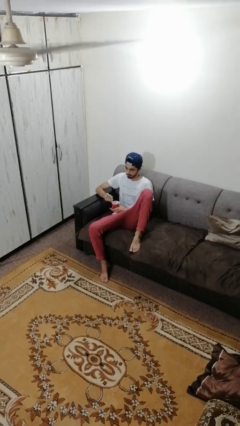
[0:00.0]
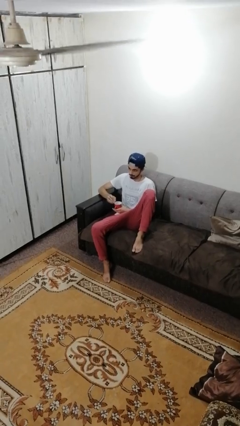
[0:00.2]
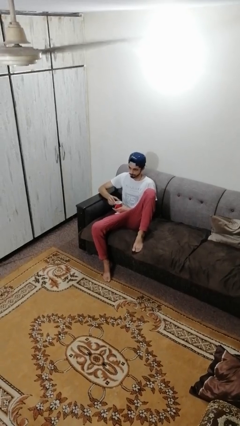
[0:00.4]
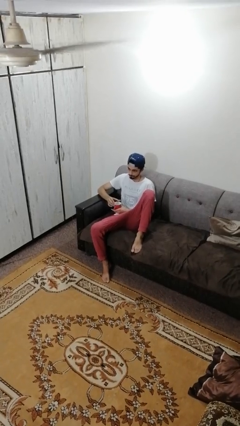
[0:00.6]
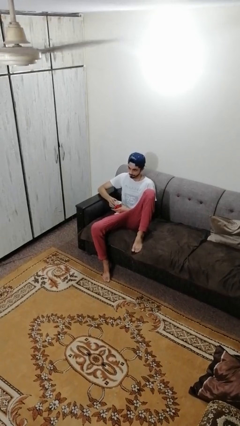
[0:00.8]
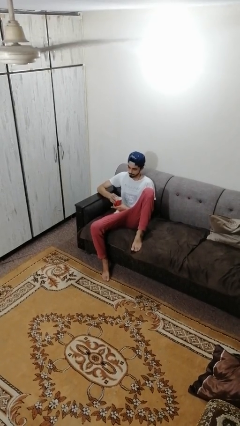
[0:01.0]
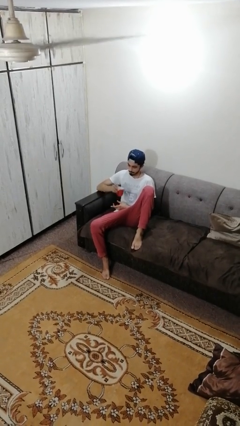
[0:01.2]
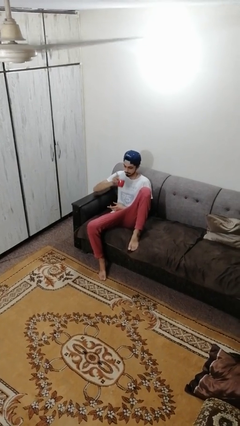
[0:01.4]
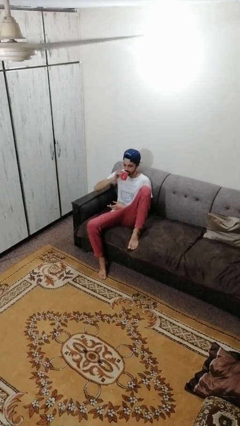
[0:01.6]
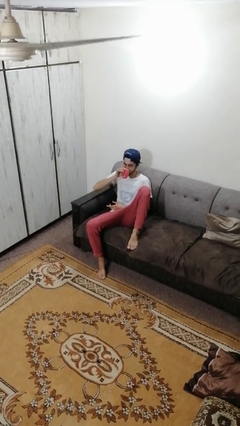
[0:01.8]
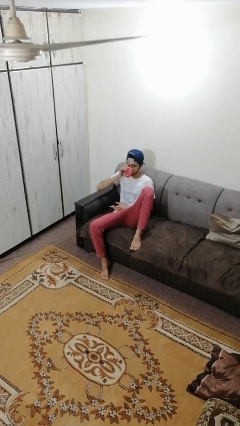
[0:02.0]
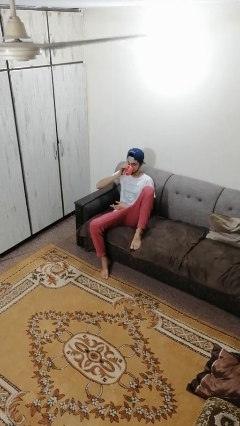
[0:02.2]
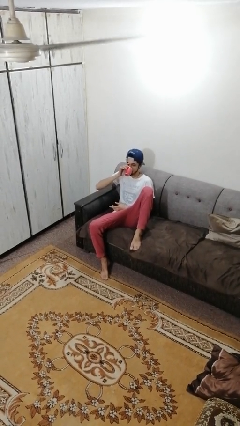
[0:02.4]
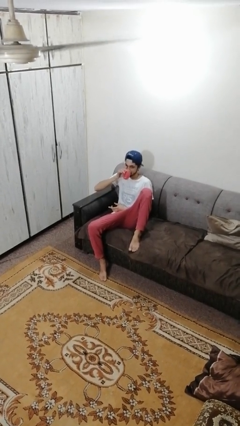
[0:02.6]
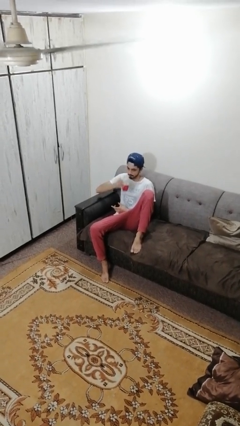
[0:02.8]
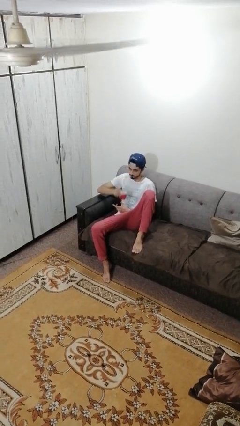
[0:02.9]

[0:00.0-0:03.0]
person drinks from mug

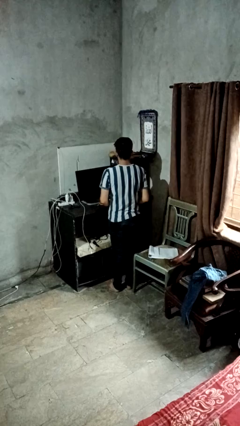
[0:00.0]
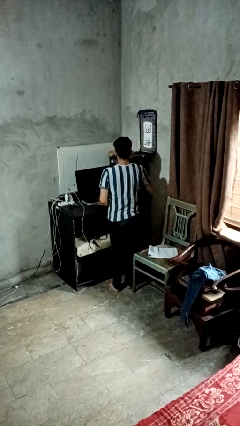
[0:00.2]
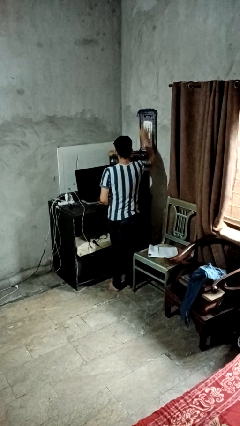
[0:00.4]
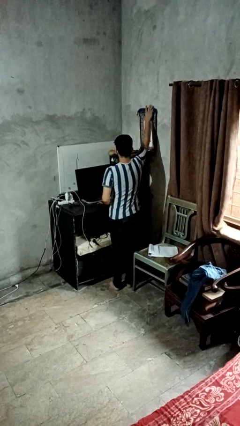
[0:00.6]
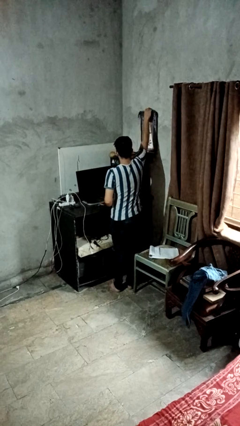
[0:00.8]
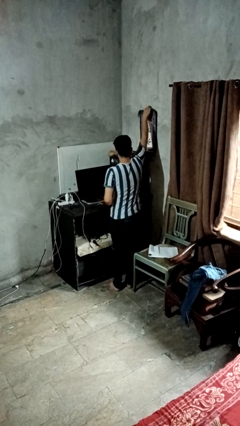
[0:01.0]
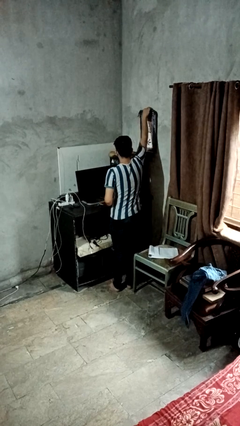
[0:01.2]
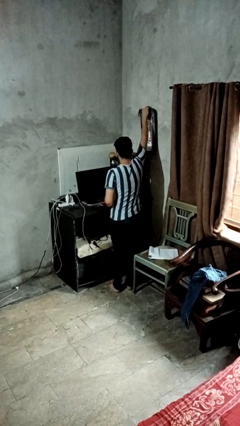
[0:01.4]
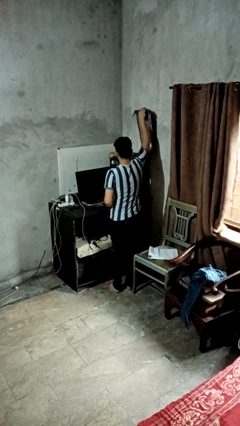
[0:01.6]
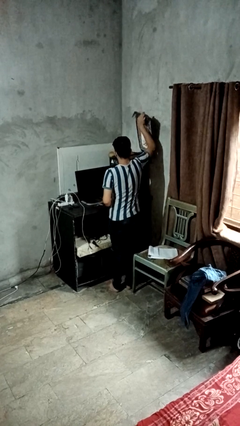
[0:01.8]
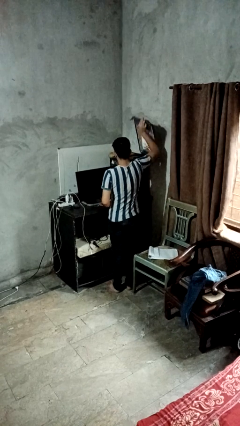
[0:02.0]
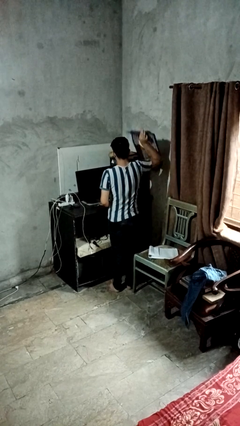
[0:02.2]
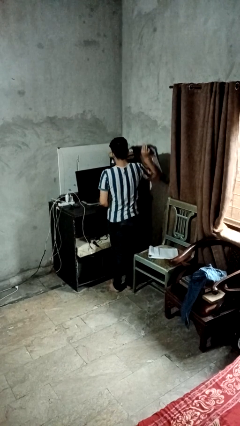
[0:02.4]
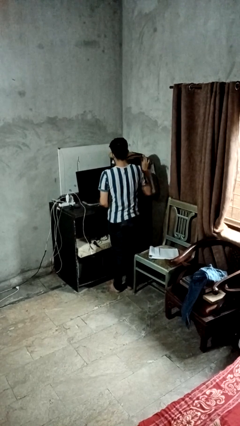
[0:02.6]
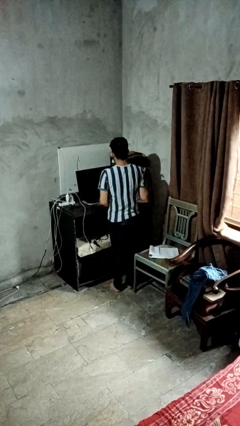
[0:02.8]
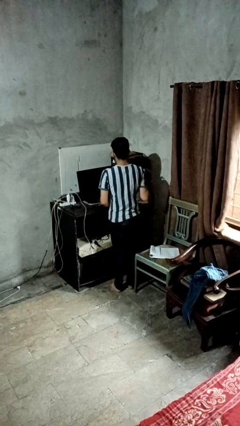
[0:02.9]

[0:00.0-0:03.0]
person takes down picture frame

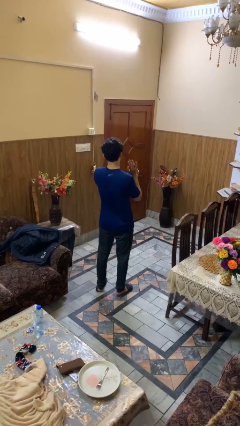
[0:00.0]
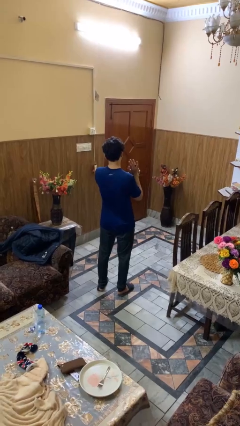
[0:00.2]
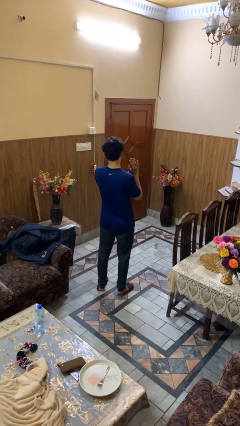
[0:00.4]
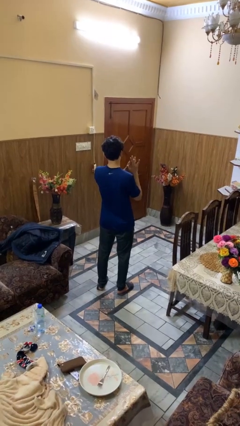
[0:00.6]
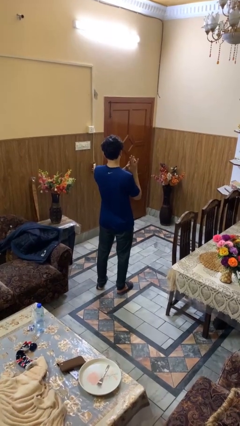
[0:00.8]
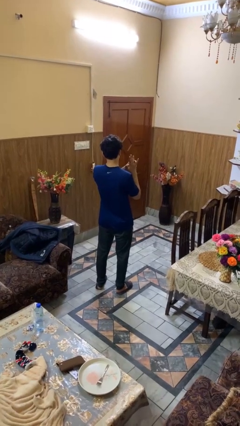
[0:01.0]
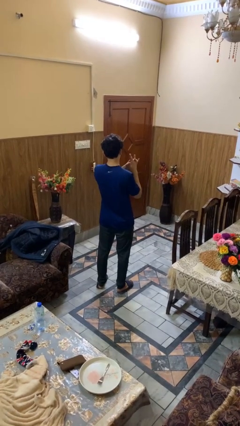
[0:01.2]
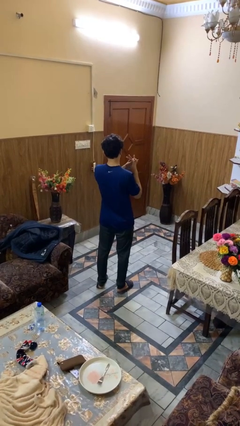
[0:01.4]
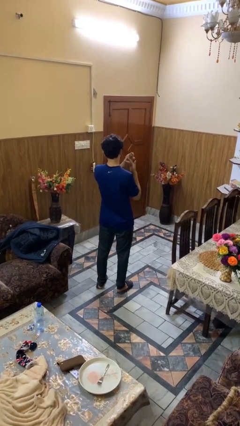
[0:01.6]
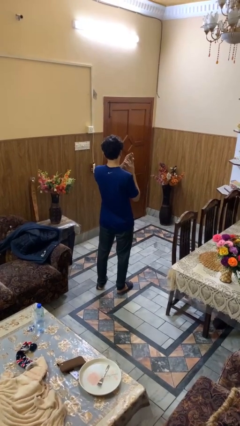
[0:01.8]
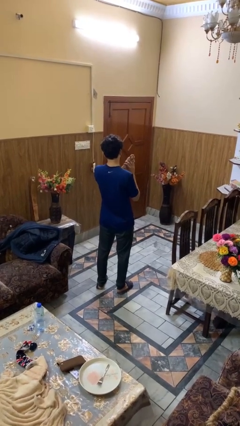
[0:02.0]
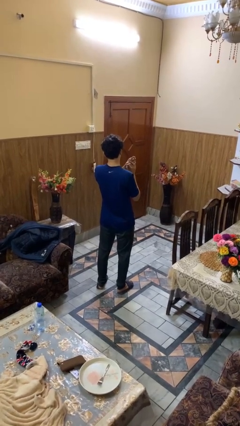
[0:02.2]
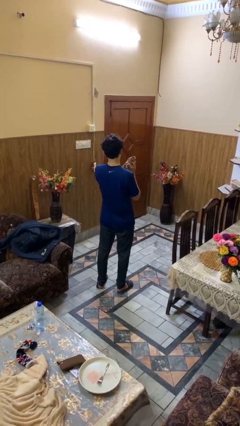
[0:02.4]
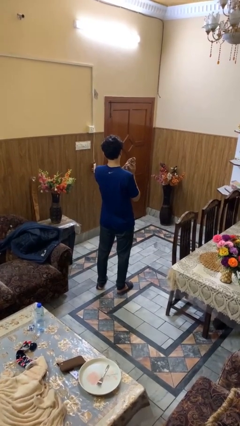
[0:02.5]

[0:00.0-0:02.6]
person takes off ring

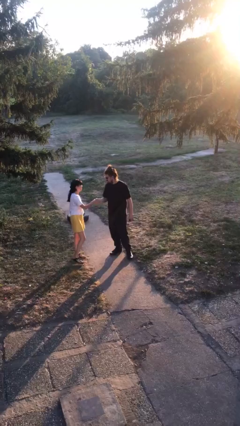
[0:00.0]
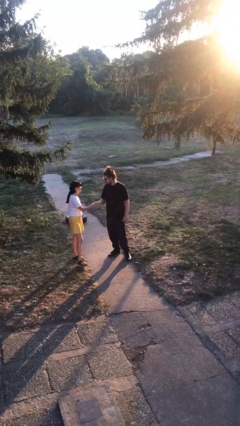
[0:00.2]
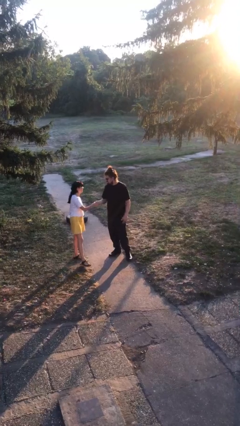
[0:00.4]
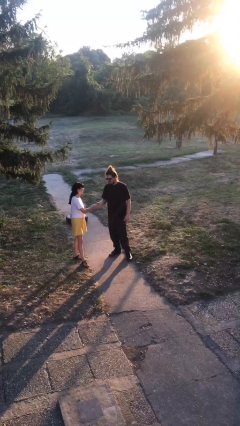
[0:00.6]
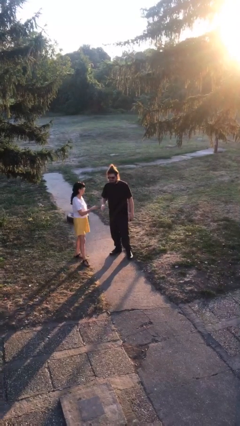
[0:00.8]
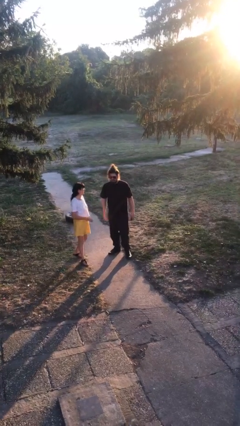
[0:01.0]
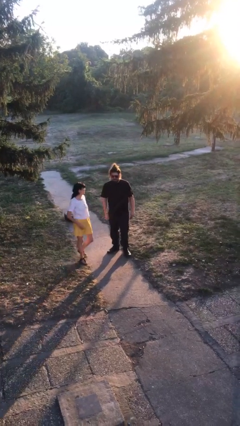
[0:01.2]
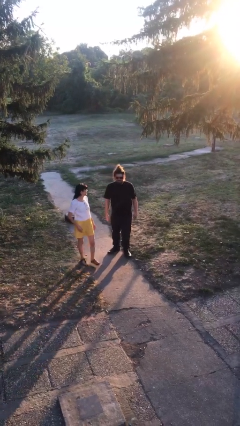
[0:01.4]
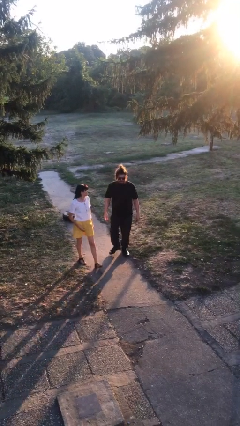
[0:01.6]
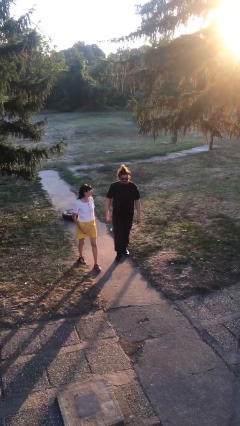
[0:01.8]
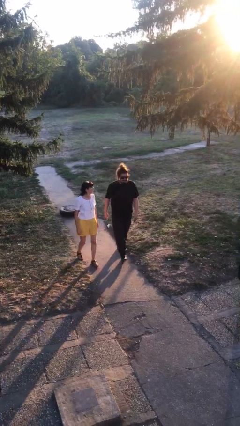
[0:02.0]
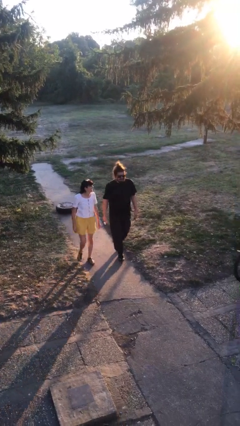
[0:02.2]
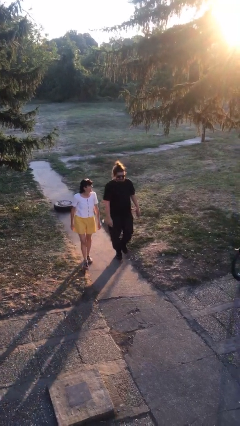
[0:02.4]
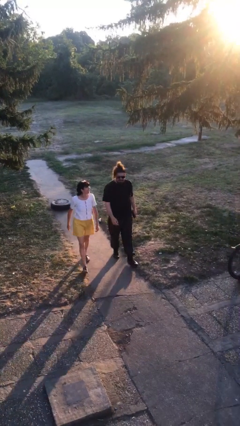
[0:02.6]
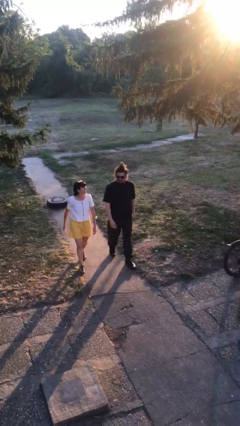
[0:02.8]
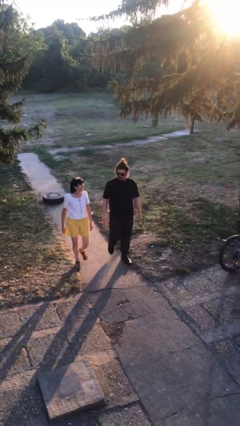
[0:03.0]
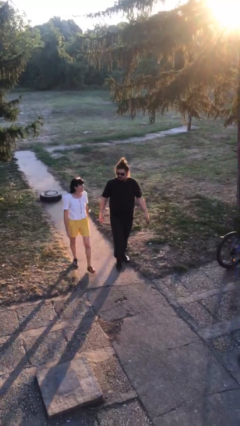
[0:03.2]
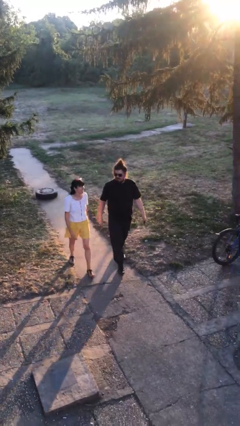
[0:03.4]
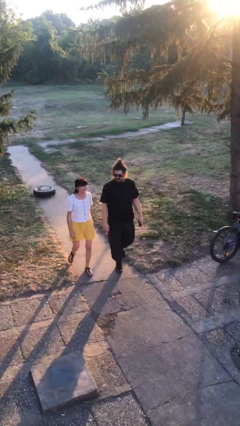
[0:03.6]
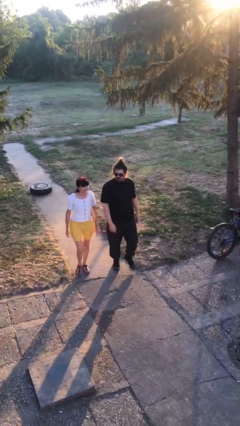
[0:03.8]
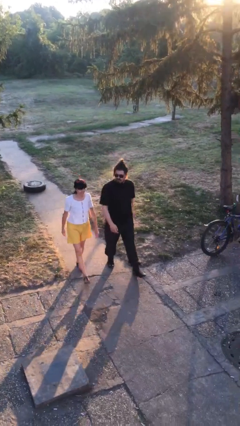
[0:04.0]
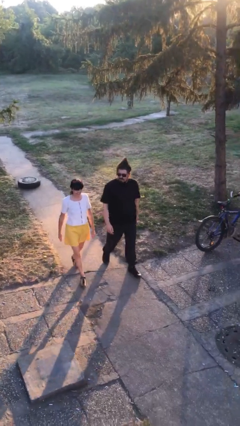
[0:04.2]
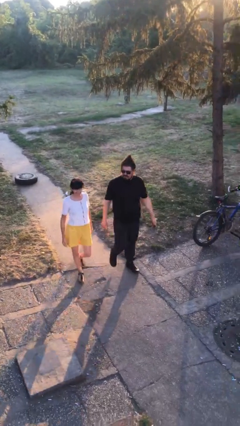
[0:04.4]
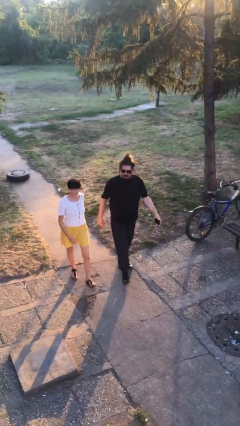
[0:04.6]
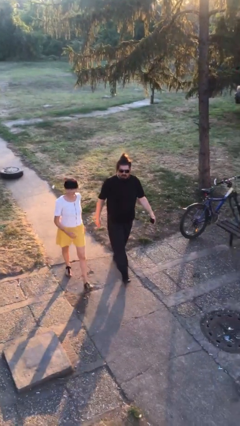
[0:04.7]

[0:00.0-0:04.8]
person talks to person

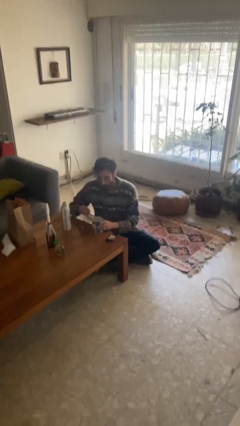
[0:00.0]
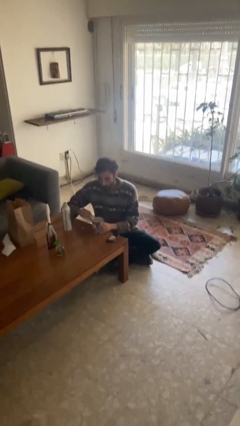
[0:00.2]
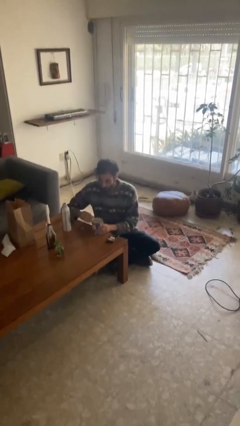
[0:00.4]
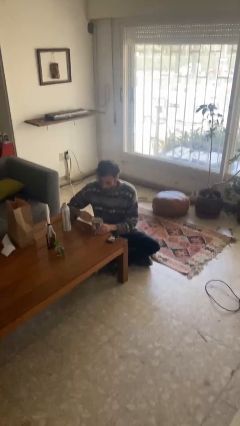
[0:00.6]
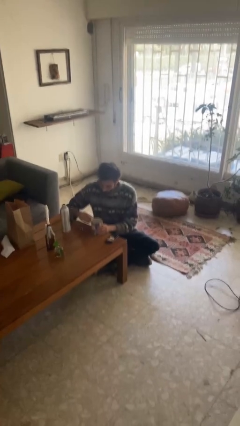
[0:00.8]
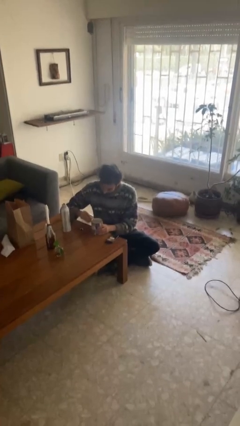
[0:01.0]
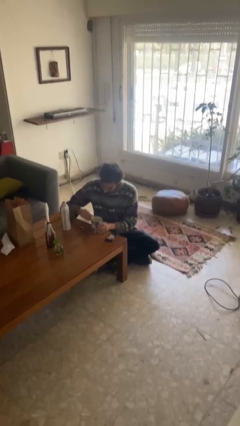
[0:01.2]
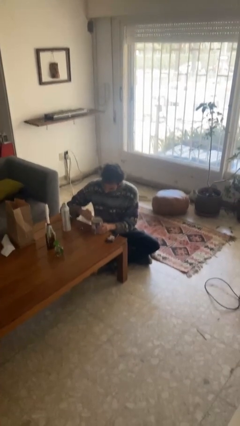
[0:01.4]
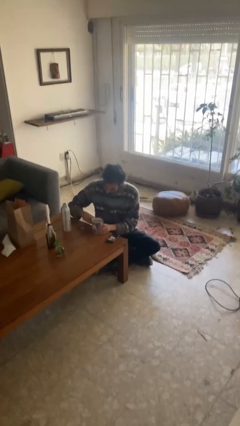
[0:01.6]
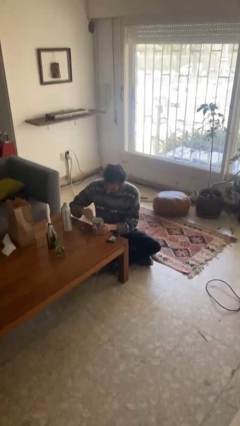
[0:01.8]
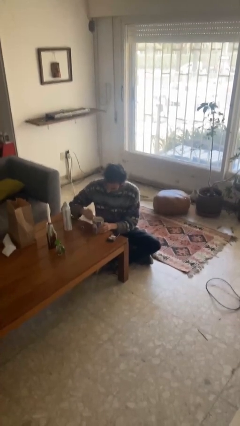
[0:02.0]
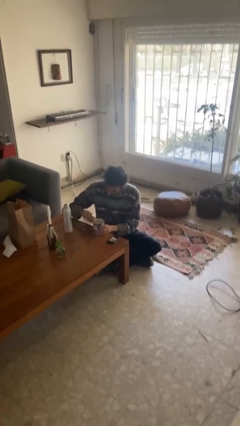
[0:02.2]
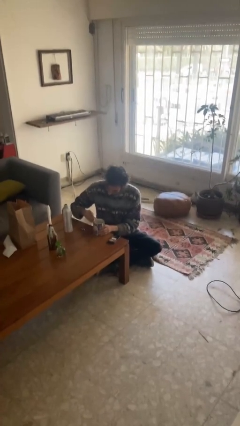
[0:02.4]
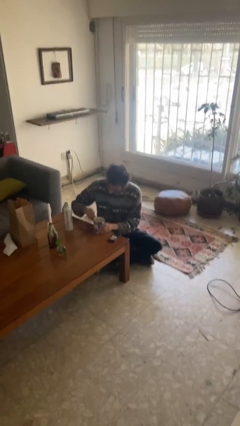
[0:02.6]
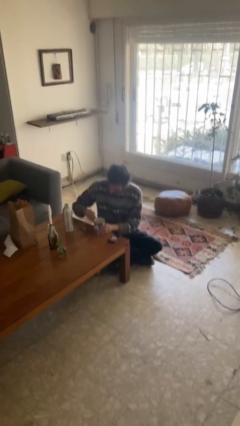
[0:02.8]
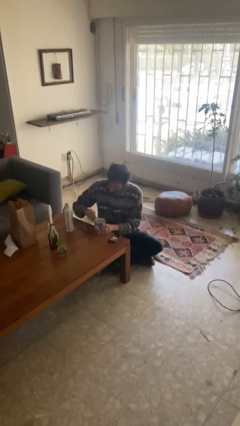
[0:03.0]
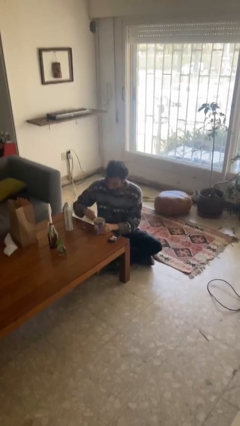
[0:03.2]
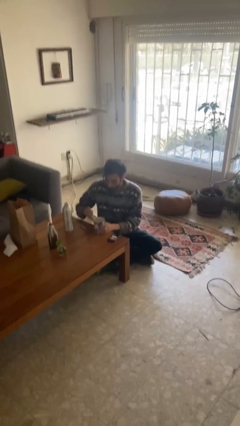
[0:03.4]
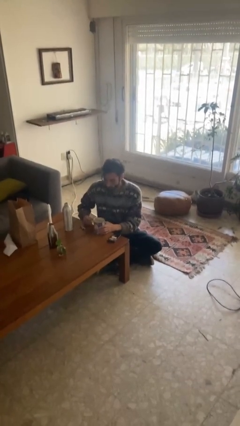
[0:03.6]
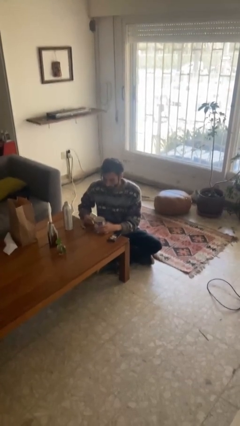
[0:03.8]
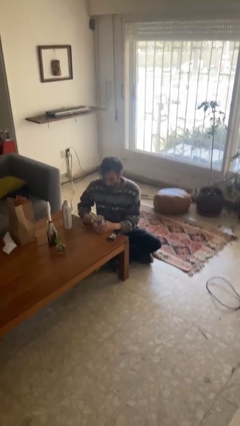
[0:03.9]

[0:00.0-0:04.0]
person opens can with can opener

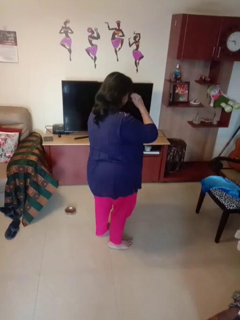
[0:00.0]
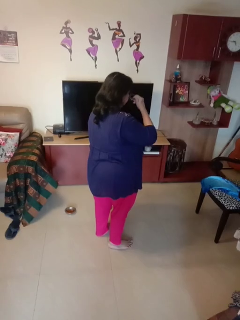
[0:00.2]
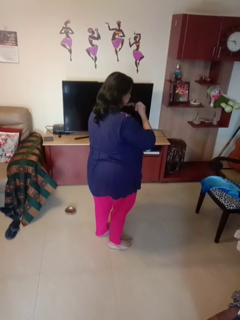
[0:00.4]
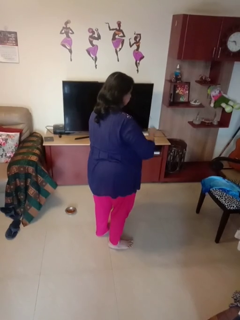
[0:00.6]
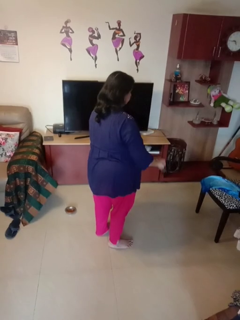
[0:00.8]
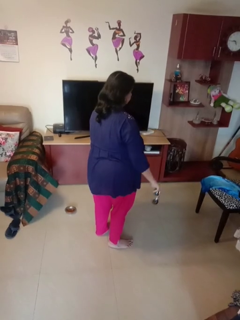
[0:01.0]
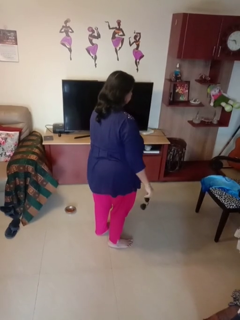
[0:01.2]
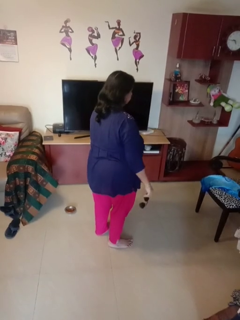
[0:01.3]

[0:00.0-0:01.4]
person takes off sunglasses
